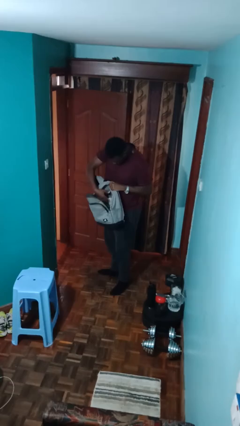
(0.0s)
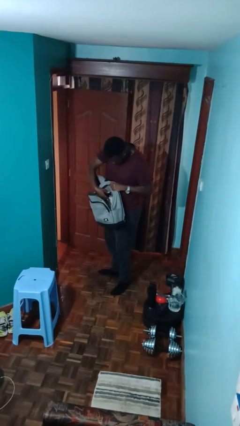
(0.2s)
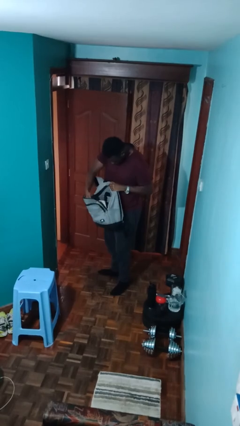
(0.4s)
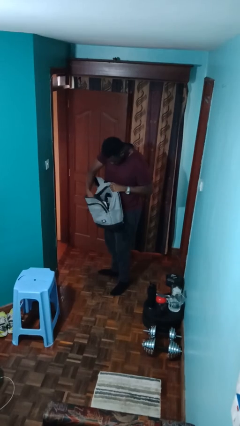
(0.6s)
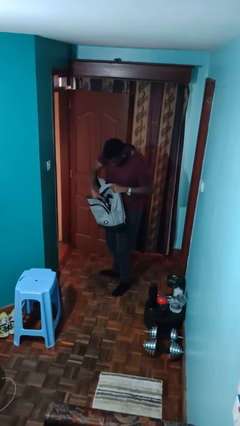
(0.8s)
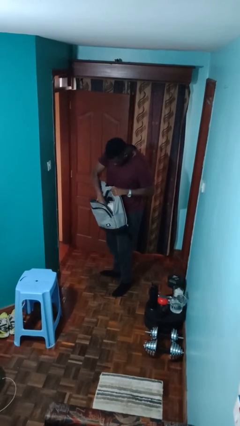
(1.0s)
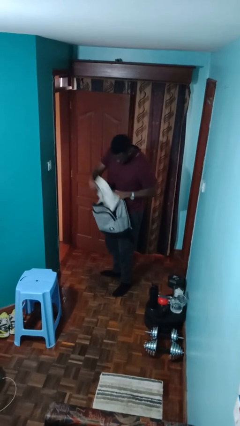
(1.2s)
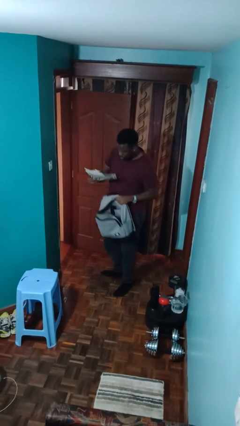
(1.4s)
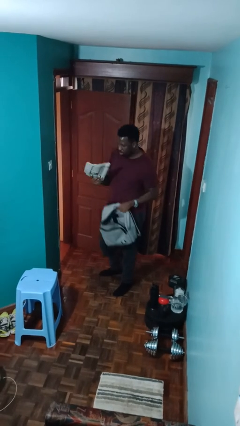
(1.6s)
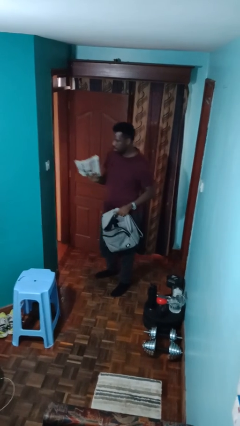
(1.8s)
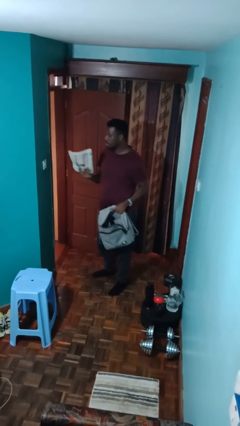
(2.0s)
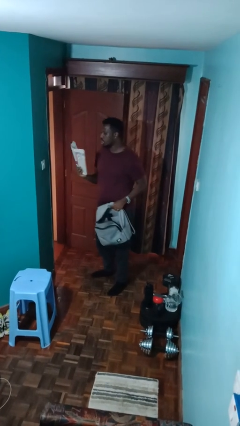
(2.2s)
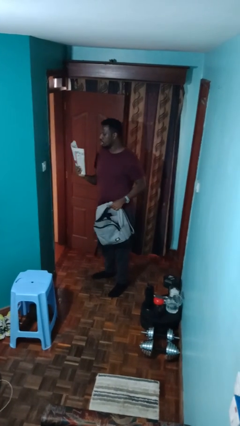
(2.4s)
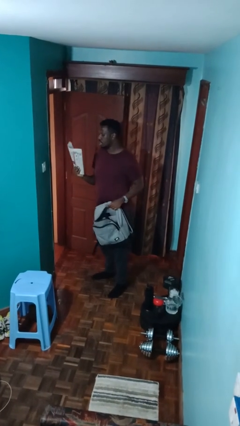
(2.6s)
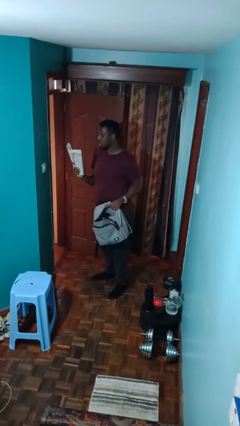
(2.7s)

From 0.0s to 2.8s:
person takes object from backpack

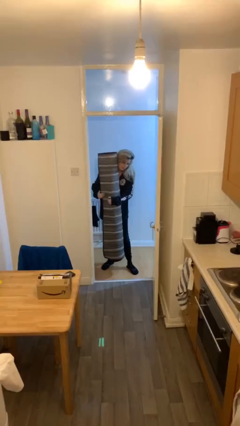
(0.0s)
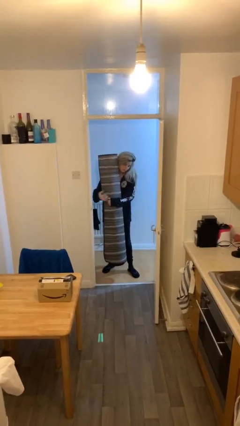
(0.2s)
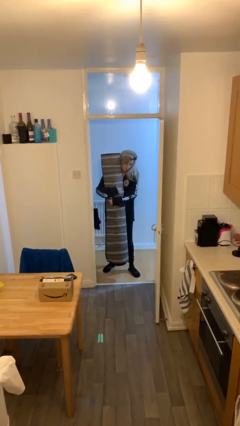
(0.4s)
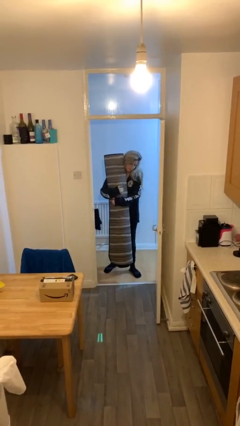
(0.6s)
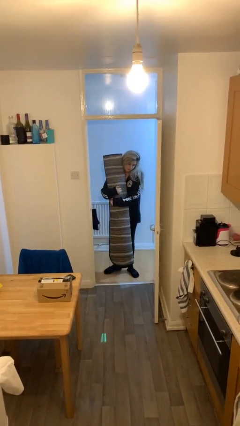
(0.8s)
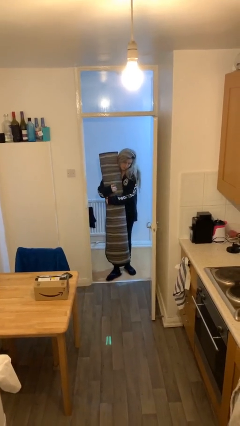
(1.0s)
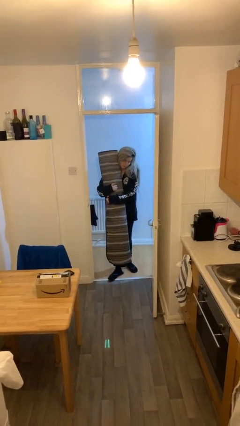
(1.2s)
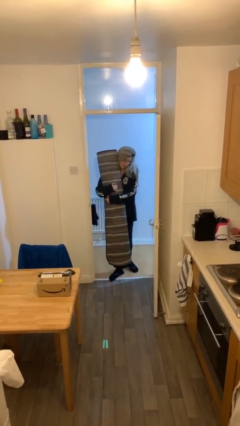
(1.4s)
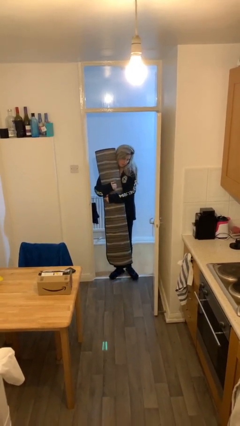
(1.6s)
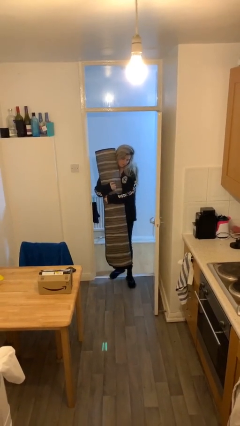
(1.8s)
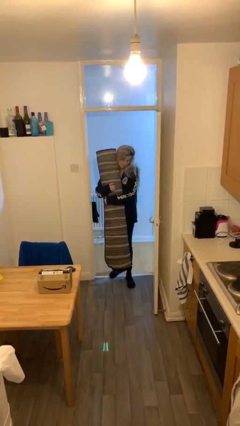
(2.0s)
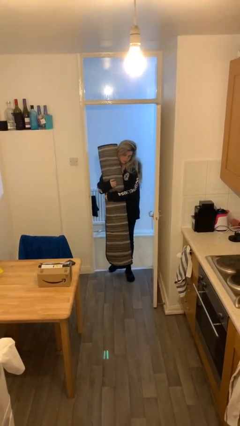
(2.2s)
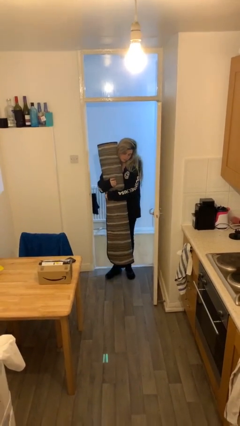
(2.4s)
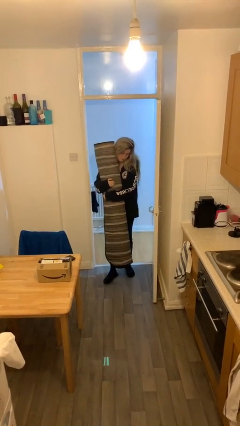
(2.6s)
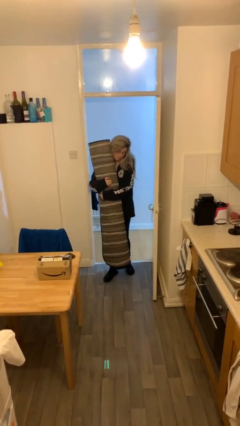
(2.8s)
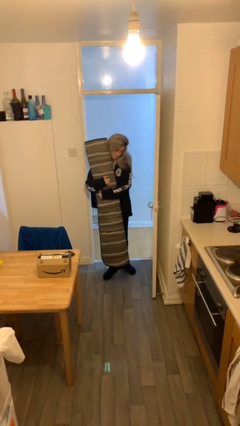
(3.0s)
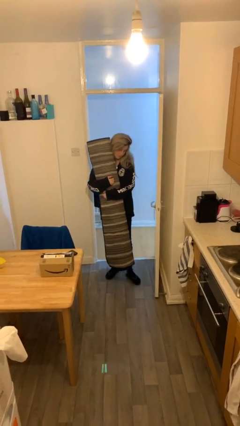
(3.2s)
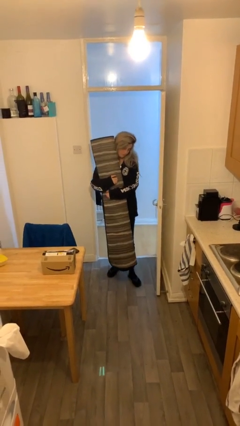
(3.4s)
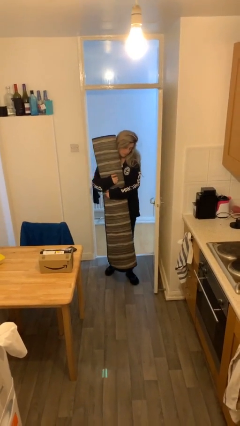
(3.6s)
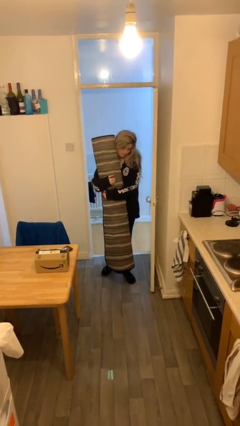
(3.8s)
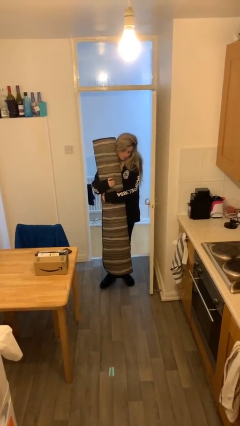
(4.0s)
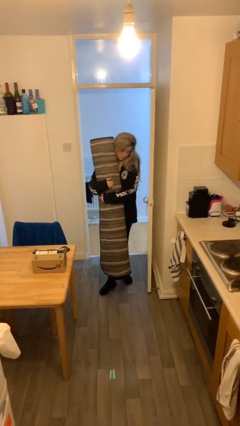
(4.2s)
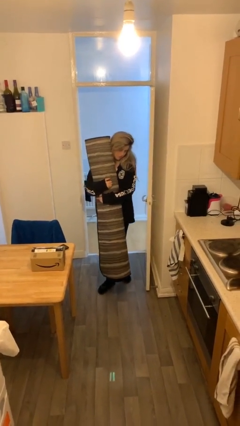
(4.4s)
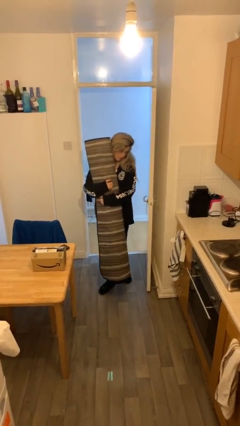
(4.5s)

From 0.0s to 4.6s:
person carries heavy object

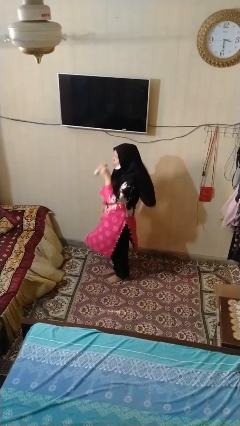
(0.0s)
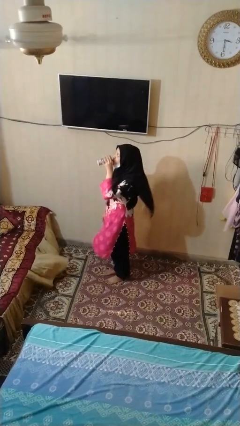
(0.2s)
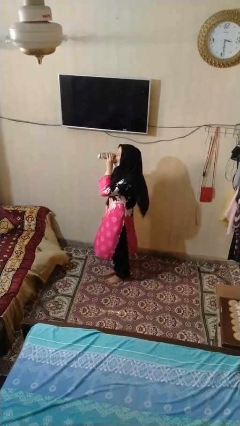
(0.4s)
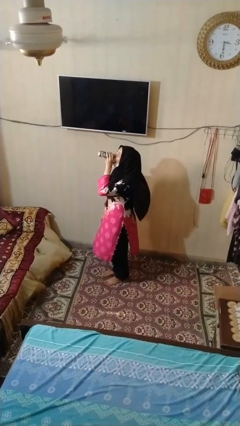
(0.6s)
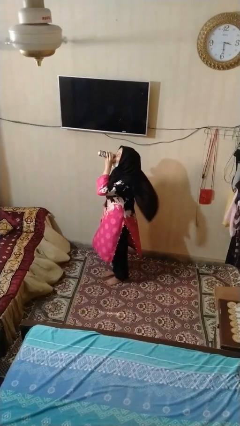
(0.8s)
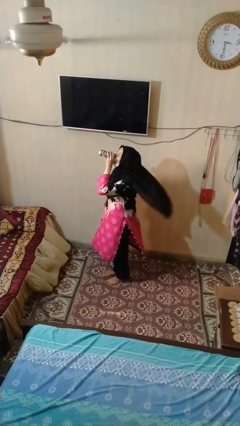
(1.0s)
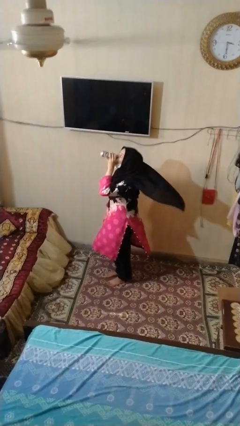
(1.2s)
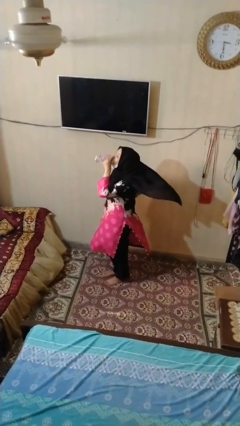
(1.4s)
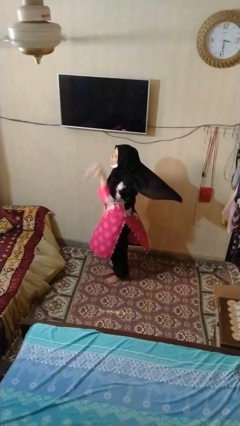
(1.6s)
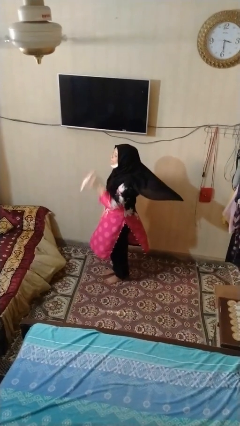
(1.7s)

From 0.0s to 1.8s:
person drinks from beverage can

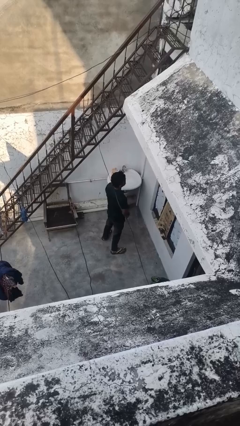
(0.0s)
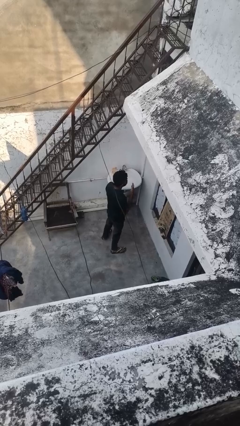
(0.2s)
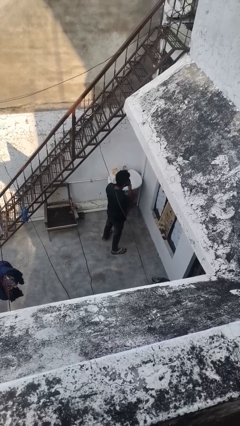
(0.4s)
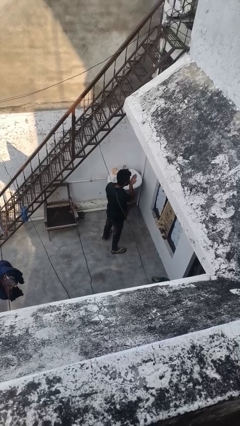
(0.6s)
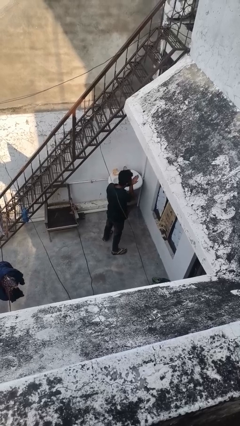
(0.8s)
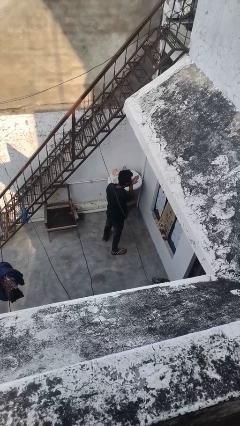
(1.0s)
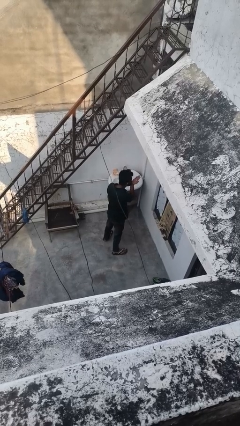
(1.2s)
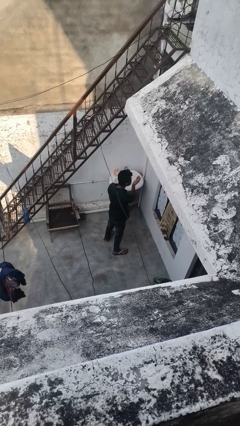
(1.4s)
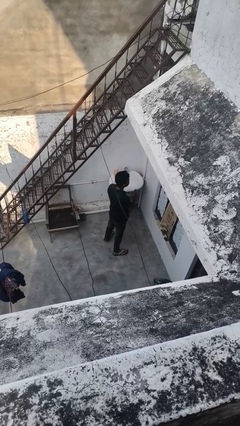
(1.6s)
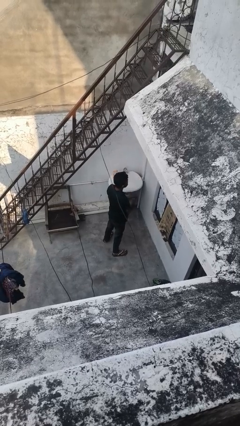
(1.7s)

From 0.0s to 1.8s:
person gestures blow kiss

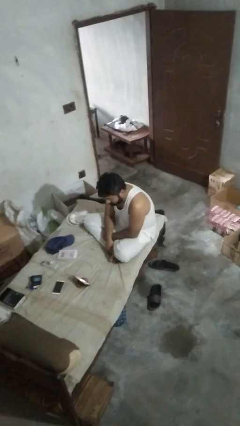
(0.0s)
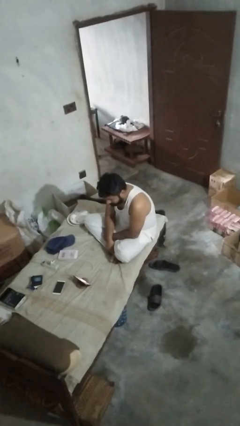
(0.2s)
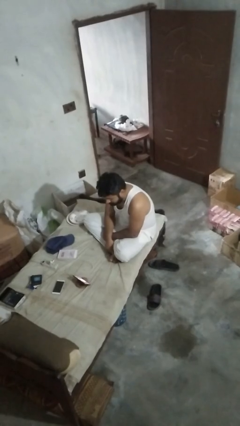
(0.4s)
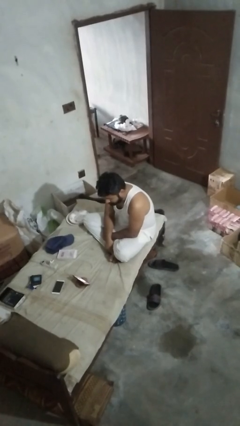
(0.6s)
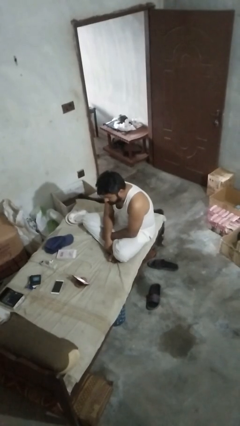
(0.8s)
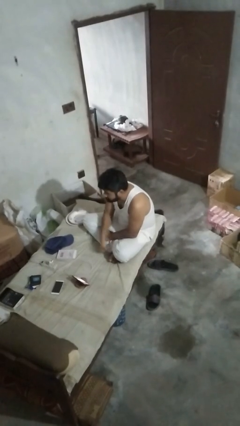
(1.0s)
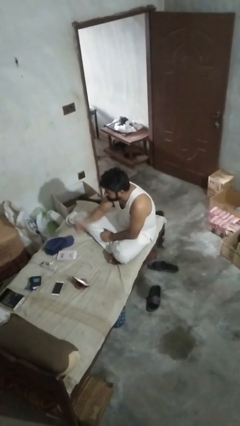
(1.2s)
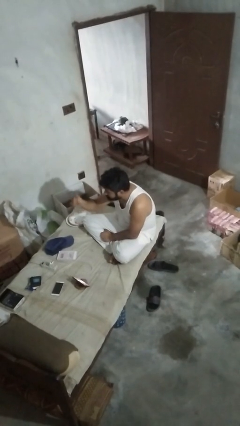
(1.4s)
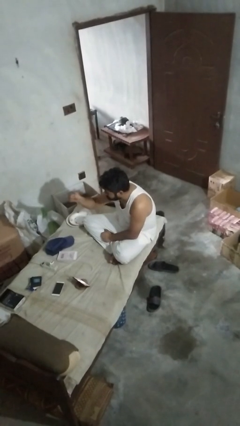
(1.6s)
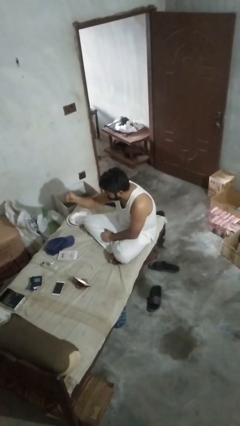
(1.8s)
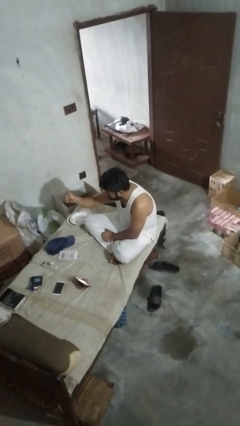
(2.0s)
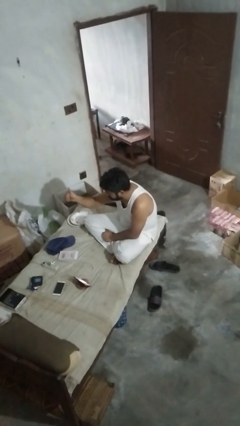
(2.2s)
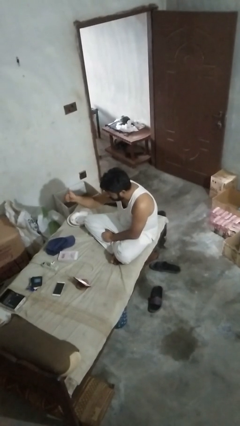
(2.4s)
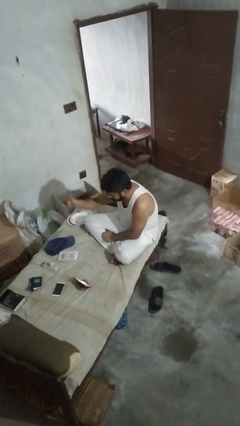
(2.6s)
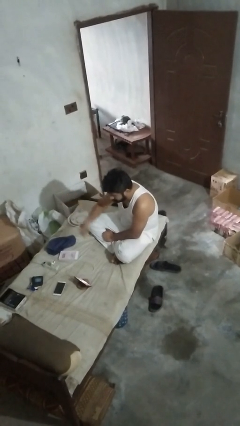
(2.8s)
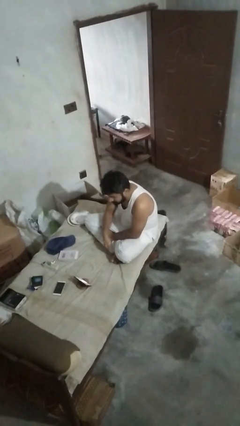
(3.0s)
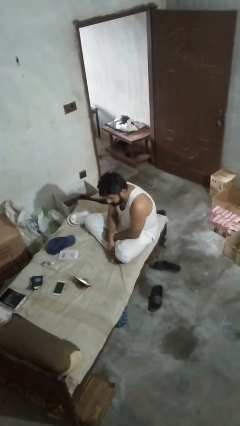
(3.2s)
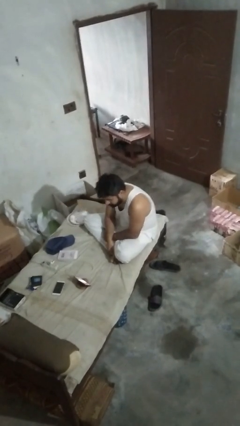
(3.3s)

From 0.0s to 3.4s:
person gestures thumbs up

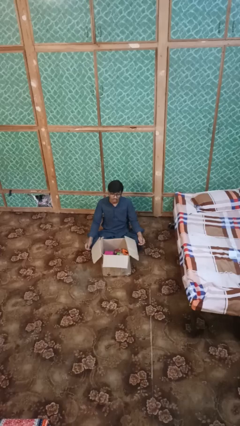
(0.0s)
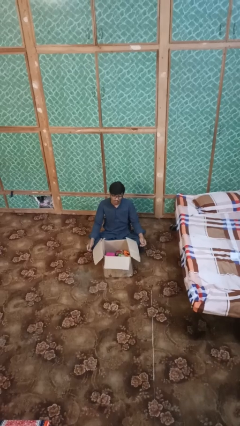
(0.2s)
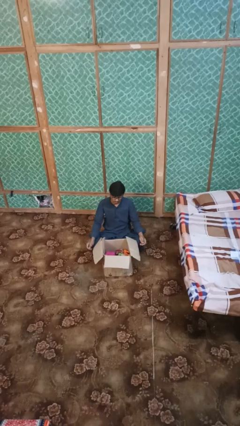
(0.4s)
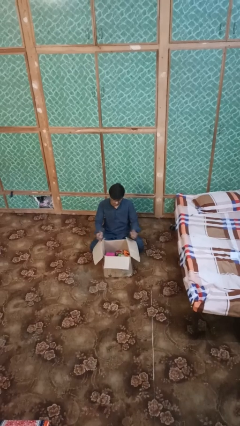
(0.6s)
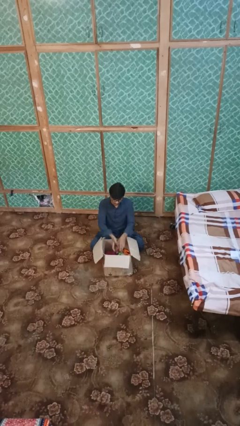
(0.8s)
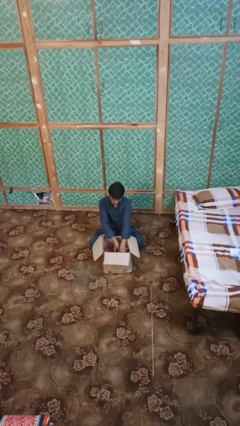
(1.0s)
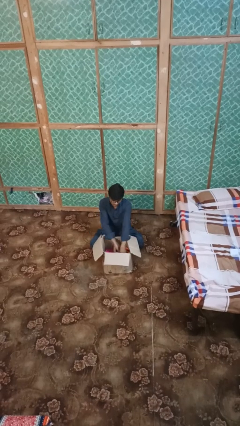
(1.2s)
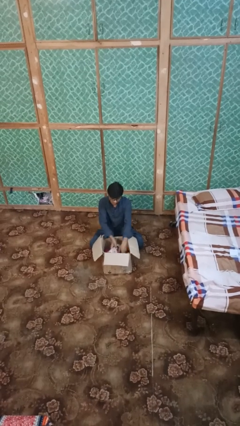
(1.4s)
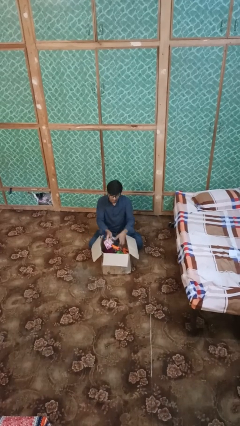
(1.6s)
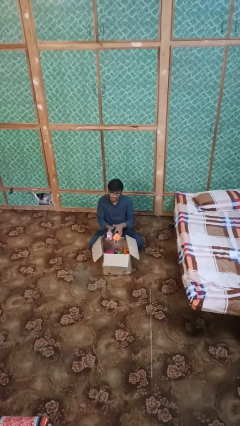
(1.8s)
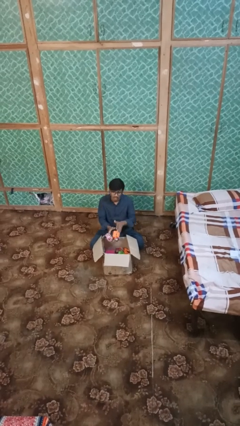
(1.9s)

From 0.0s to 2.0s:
person takes object from box

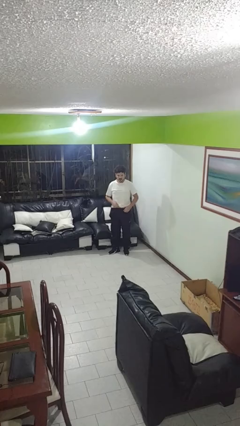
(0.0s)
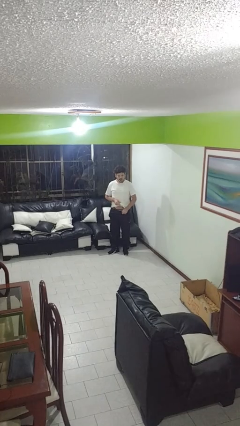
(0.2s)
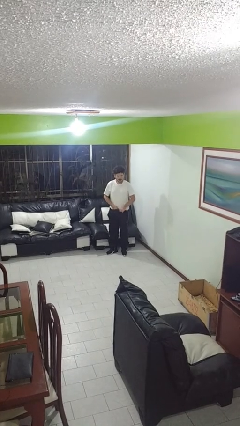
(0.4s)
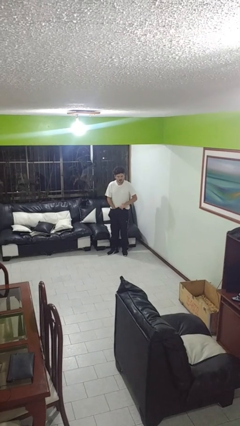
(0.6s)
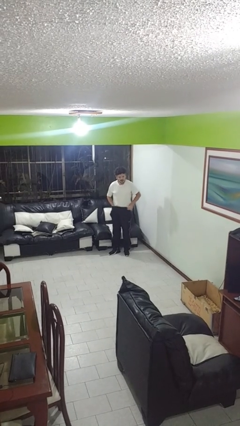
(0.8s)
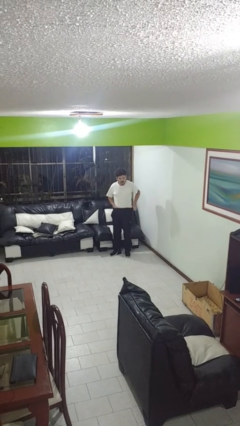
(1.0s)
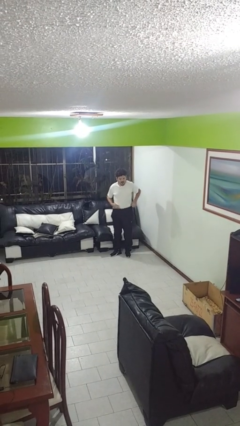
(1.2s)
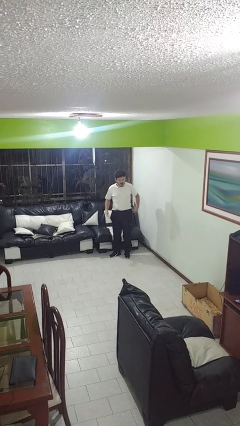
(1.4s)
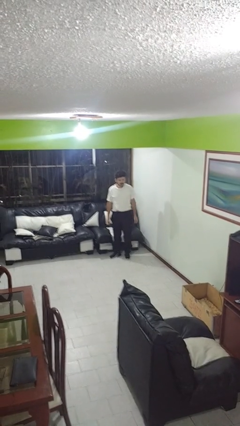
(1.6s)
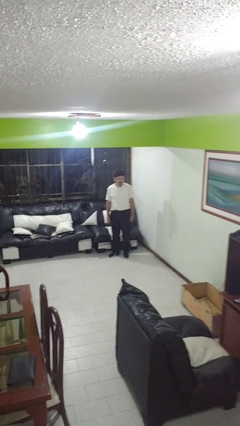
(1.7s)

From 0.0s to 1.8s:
person tucks in shirt
